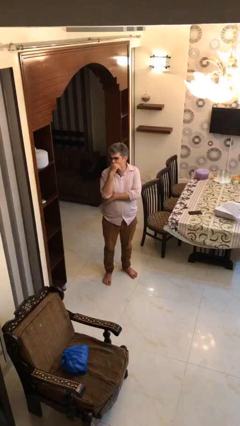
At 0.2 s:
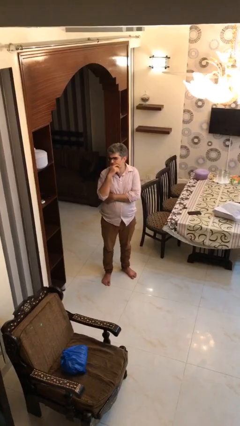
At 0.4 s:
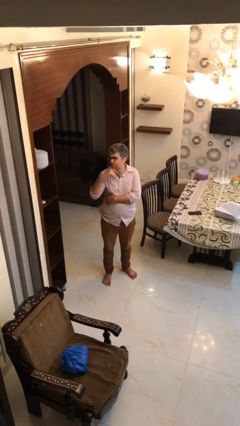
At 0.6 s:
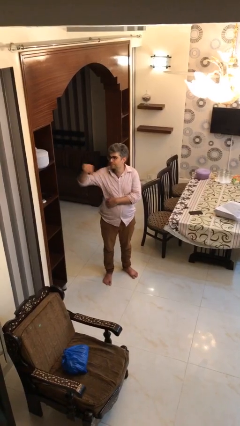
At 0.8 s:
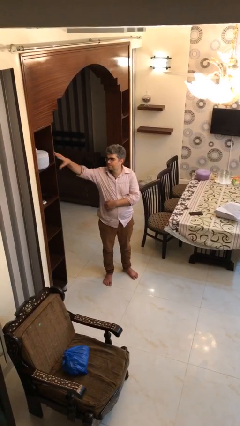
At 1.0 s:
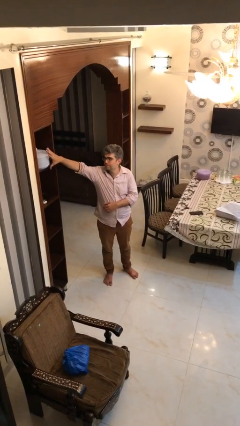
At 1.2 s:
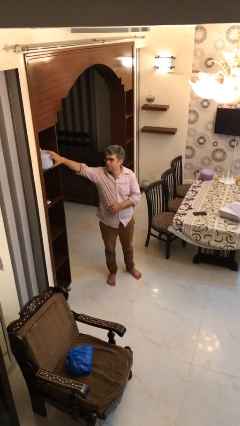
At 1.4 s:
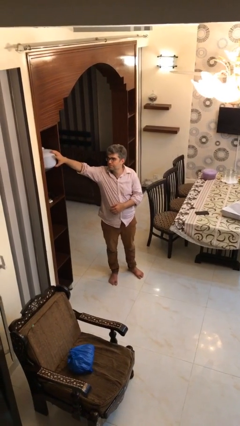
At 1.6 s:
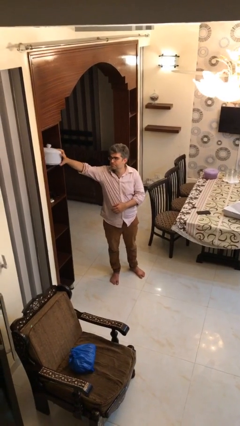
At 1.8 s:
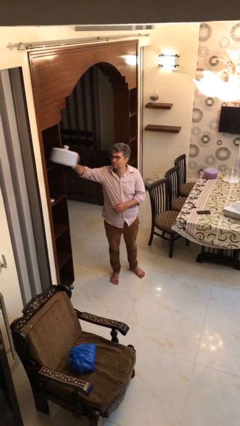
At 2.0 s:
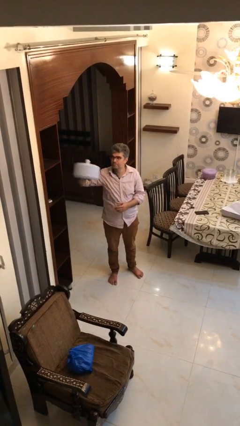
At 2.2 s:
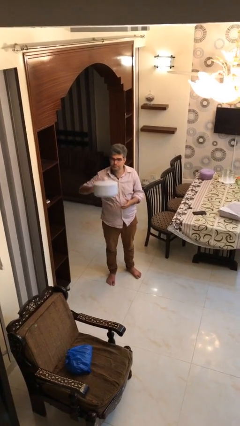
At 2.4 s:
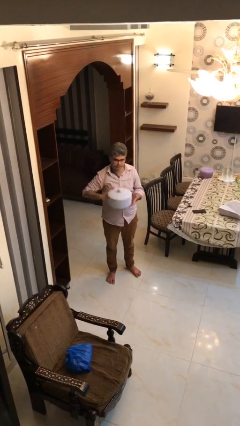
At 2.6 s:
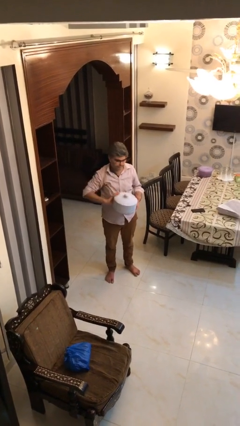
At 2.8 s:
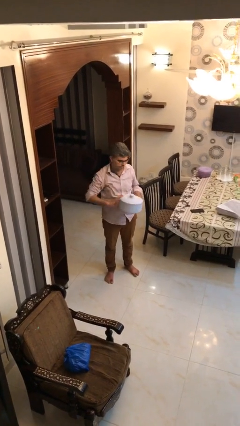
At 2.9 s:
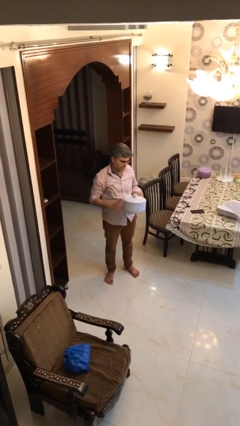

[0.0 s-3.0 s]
person picks up object from shelf

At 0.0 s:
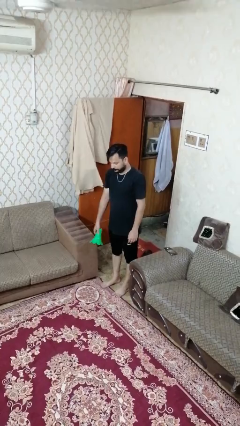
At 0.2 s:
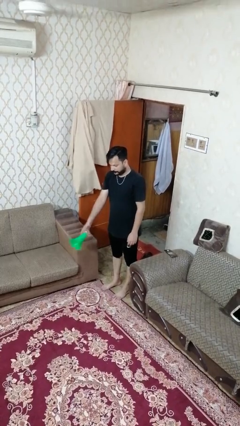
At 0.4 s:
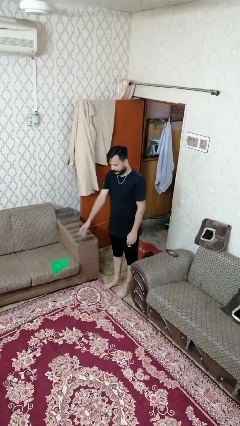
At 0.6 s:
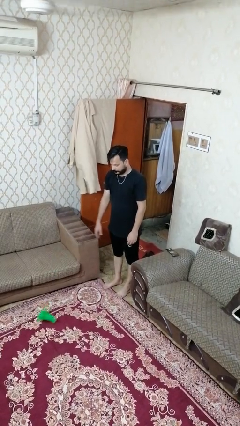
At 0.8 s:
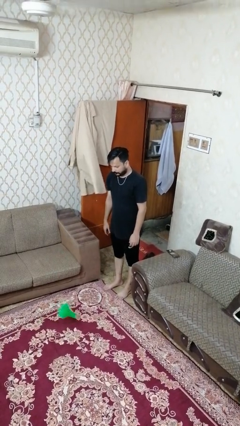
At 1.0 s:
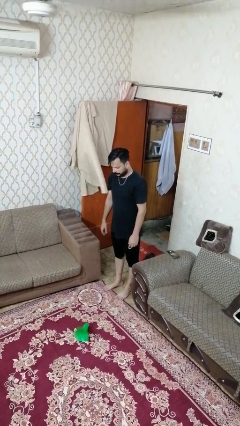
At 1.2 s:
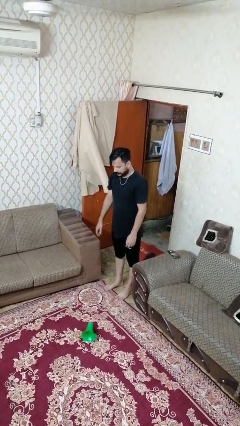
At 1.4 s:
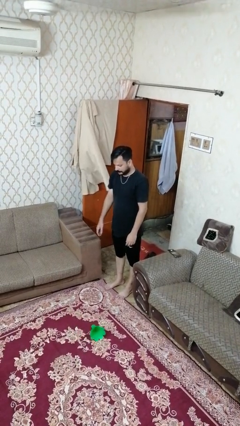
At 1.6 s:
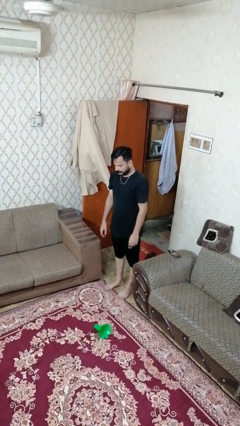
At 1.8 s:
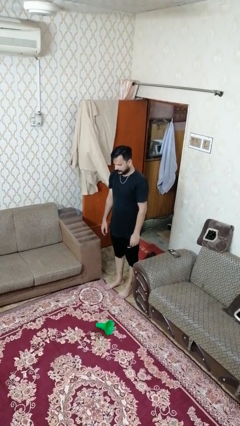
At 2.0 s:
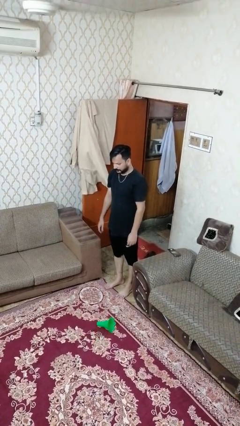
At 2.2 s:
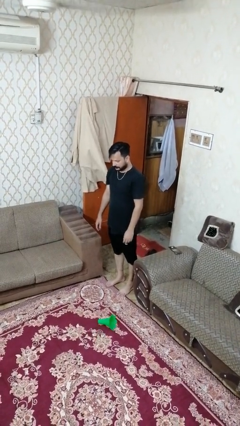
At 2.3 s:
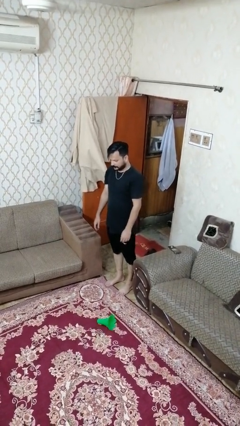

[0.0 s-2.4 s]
person throws object to ground

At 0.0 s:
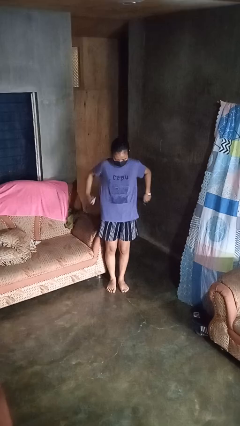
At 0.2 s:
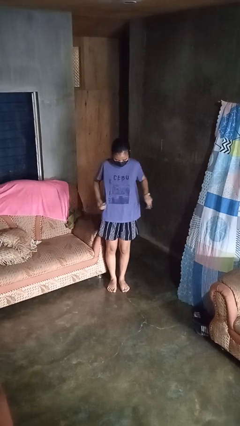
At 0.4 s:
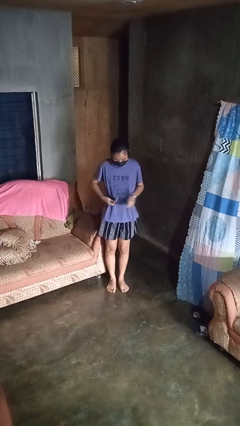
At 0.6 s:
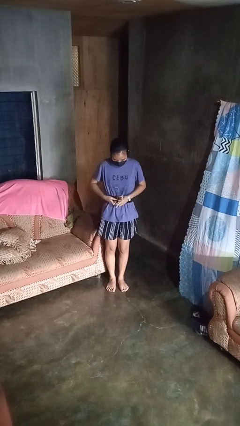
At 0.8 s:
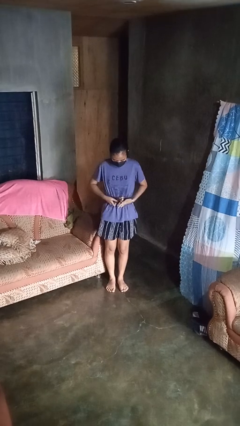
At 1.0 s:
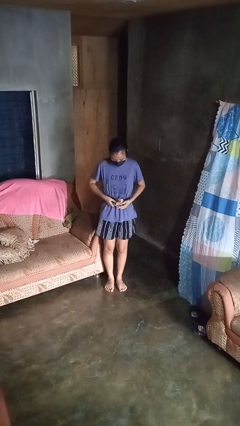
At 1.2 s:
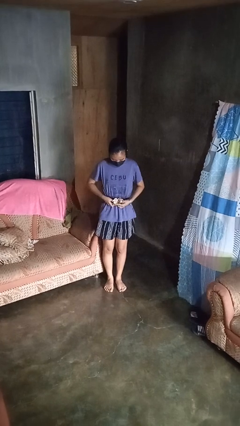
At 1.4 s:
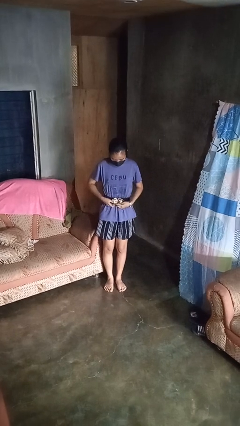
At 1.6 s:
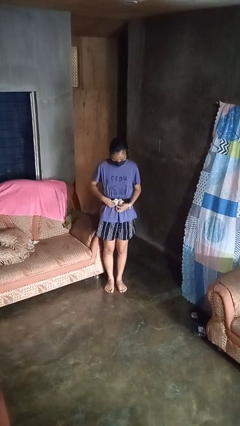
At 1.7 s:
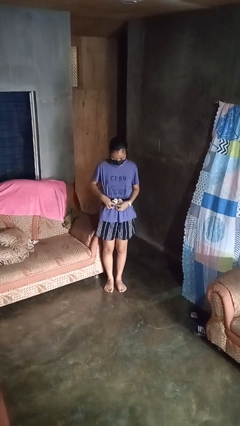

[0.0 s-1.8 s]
person puts on belt

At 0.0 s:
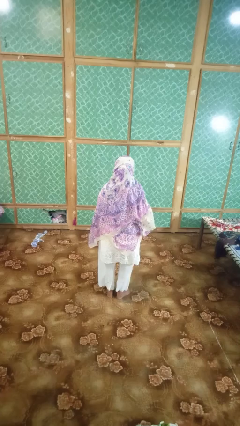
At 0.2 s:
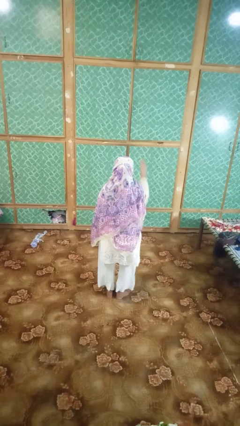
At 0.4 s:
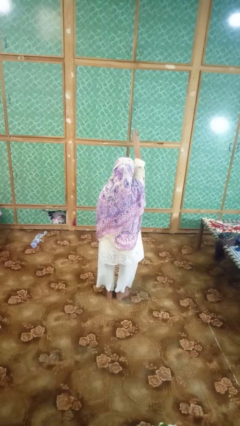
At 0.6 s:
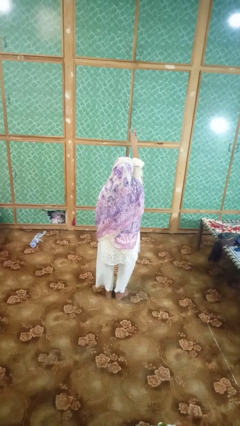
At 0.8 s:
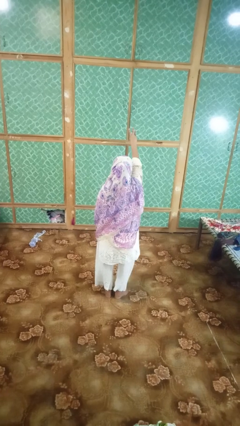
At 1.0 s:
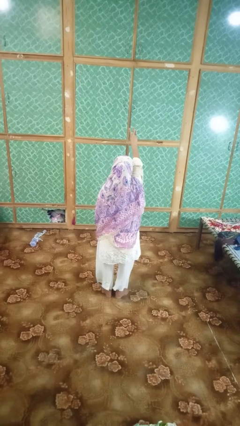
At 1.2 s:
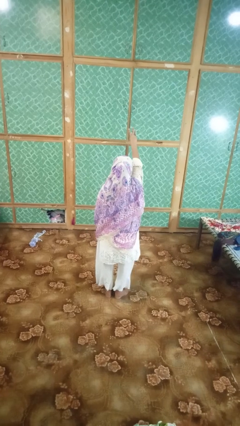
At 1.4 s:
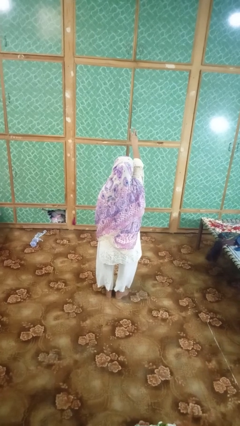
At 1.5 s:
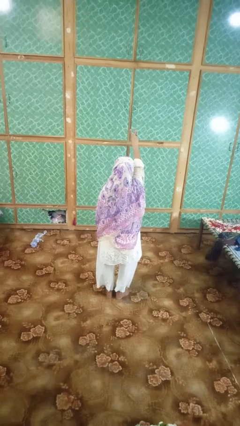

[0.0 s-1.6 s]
person gestures number three

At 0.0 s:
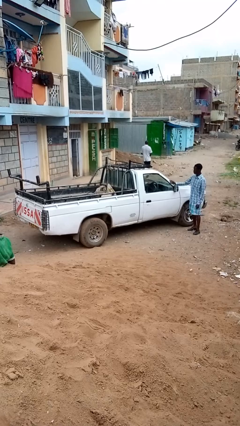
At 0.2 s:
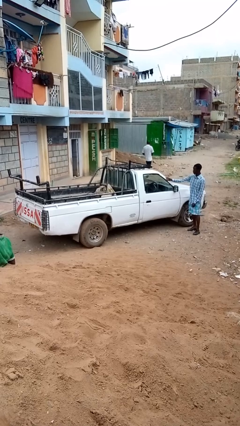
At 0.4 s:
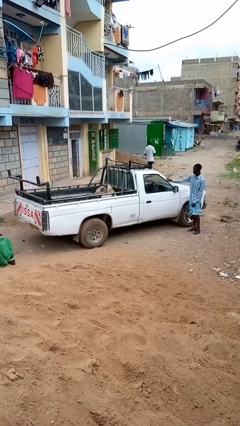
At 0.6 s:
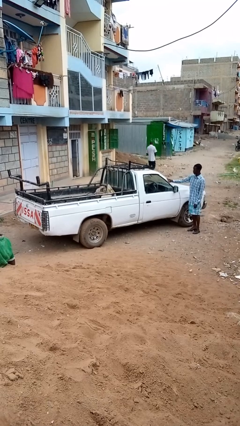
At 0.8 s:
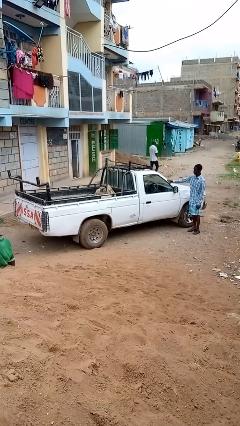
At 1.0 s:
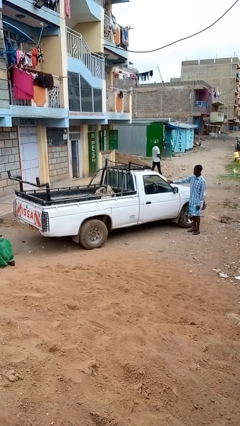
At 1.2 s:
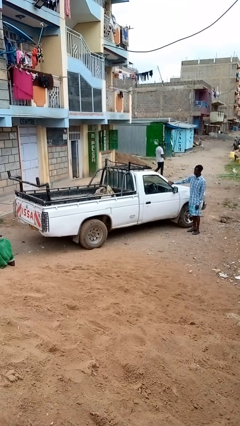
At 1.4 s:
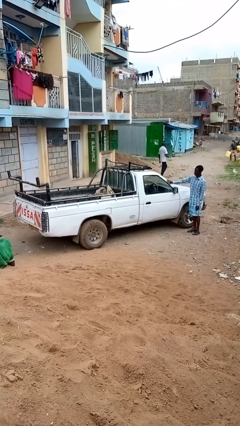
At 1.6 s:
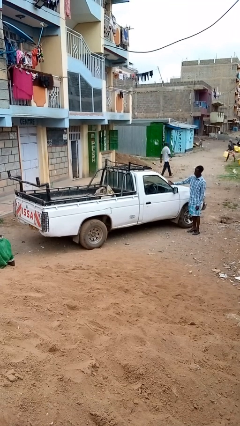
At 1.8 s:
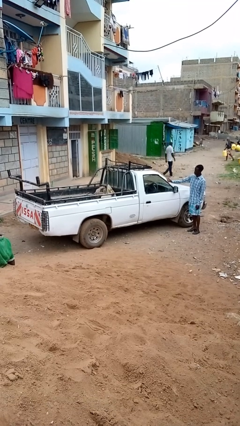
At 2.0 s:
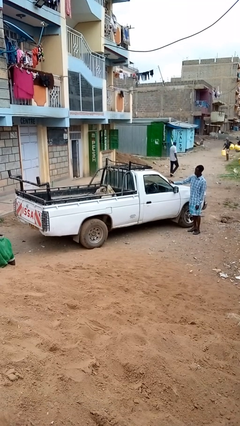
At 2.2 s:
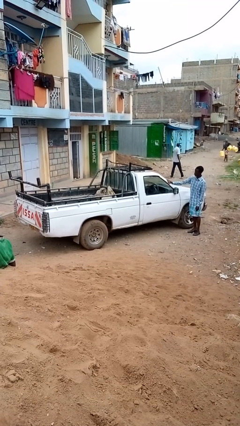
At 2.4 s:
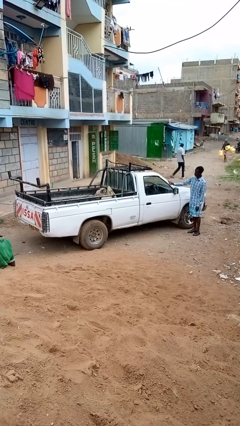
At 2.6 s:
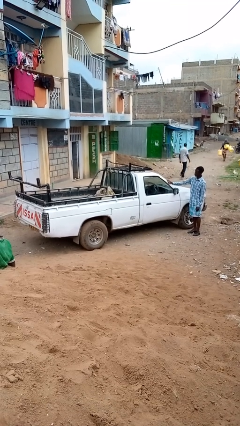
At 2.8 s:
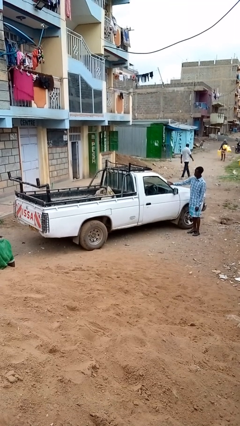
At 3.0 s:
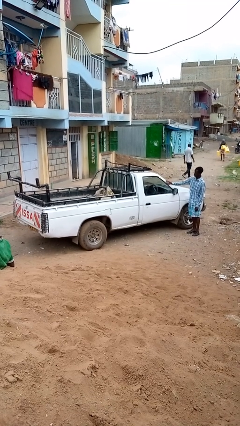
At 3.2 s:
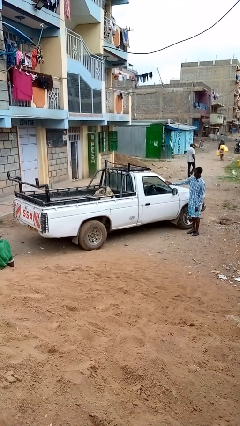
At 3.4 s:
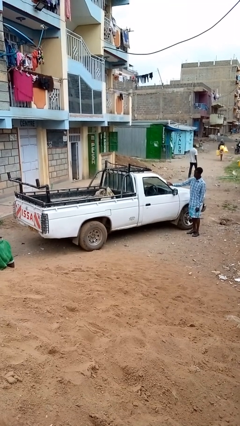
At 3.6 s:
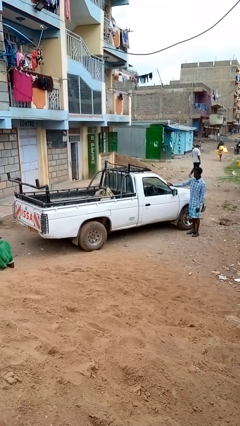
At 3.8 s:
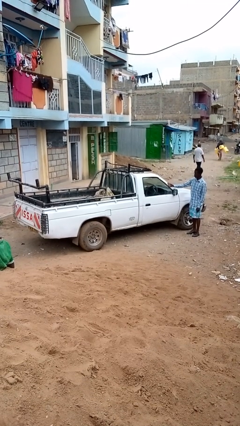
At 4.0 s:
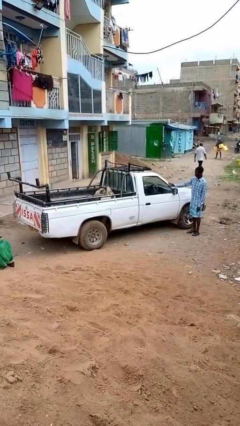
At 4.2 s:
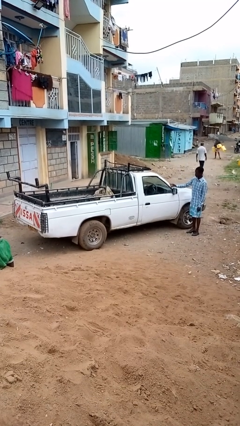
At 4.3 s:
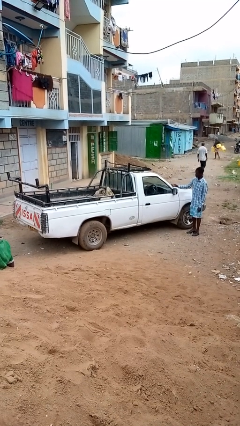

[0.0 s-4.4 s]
person polishes car with rag

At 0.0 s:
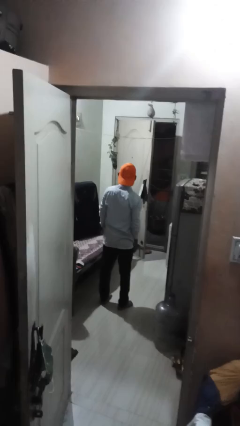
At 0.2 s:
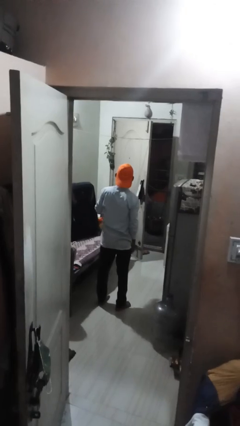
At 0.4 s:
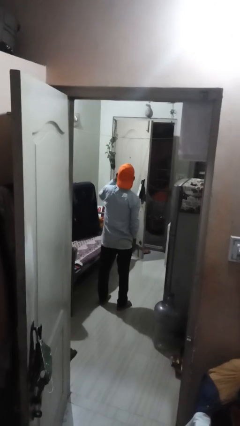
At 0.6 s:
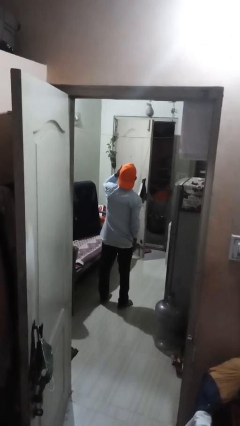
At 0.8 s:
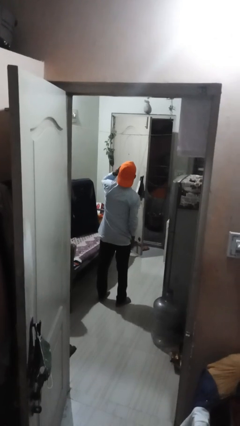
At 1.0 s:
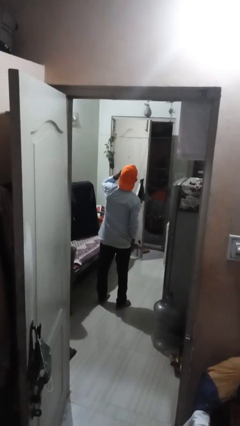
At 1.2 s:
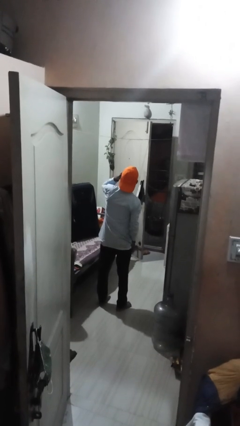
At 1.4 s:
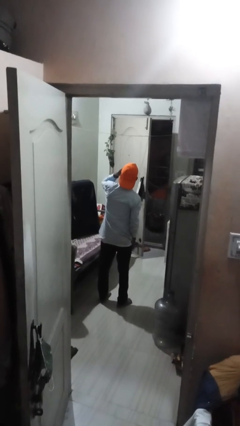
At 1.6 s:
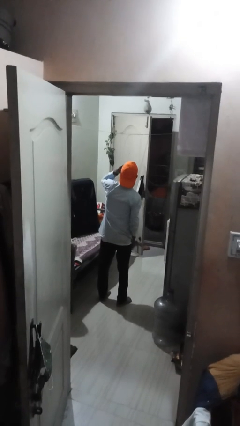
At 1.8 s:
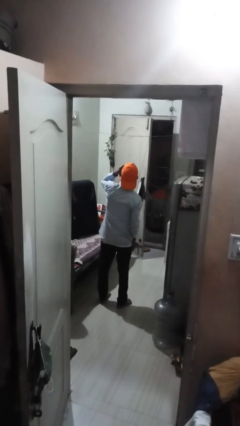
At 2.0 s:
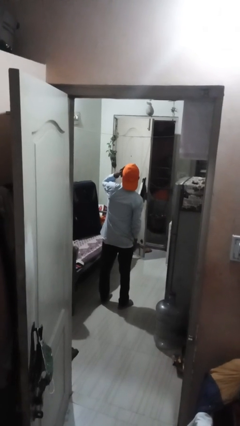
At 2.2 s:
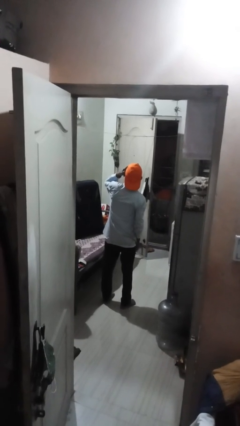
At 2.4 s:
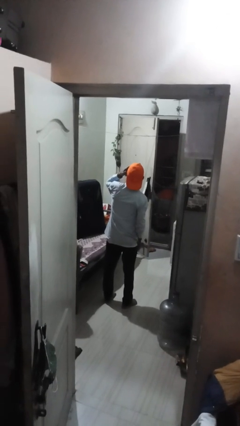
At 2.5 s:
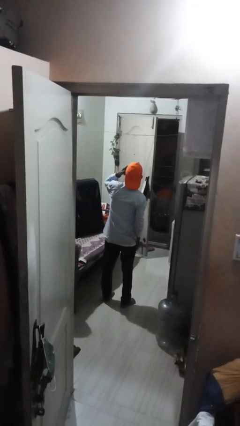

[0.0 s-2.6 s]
person covers face with hands

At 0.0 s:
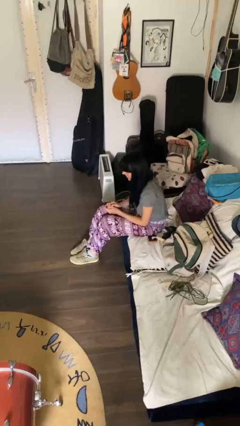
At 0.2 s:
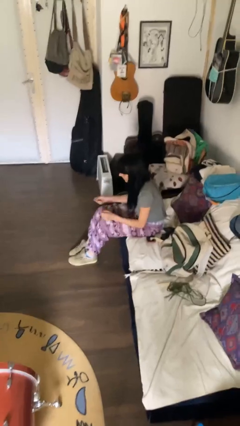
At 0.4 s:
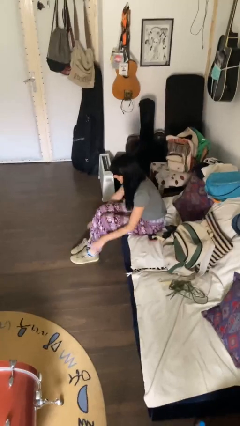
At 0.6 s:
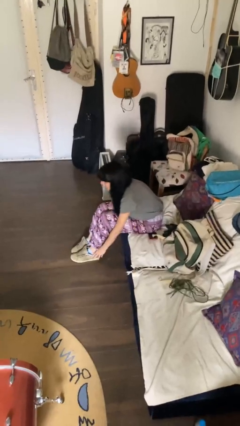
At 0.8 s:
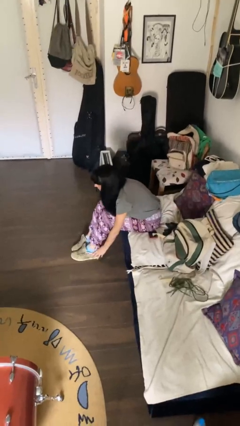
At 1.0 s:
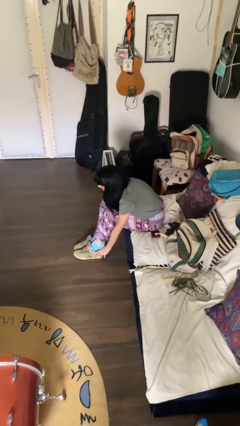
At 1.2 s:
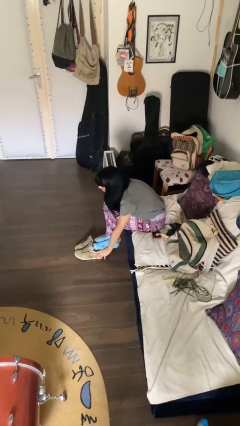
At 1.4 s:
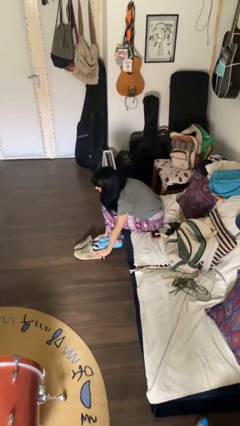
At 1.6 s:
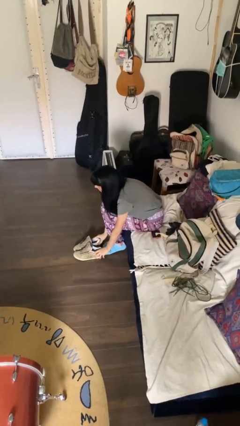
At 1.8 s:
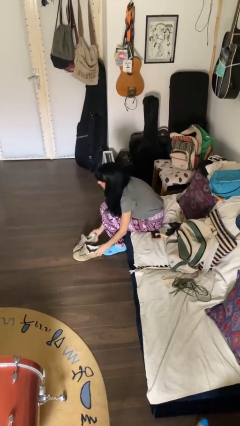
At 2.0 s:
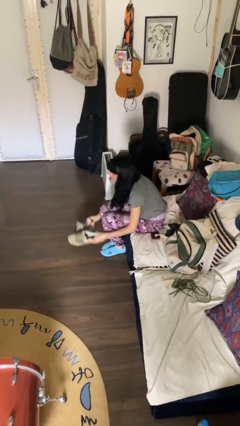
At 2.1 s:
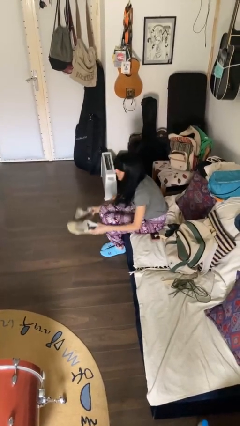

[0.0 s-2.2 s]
person takes off shoes
